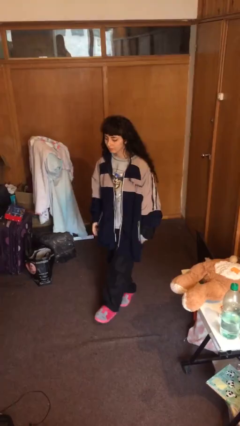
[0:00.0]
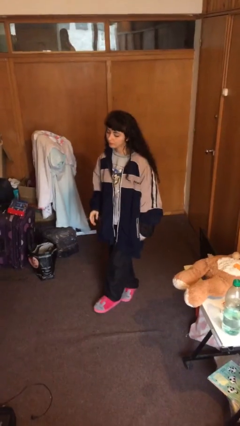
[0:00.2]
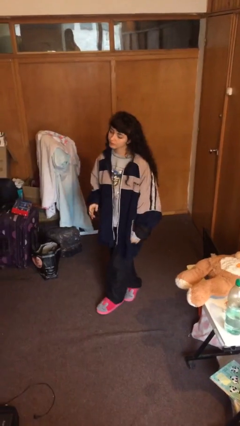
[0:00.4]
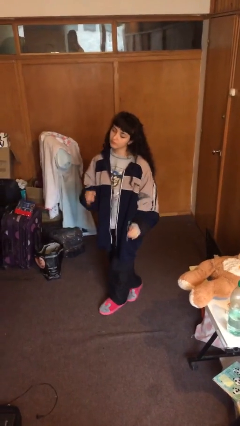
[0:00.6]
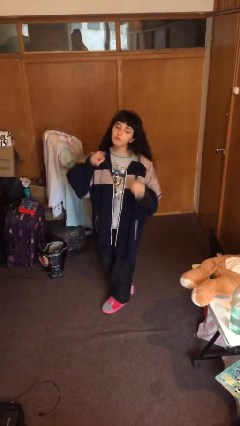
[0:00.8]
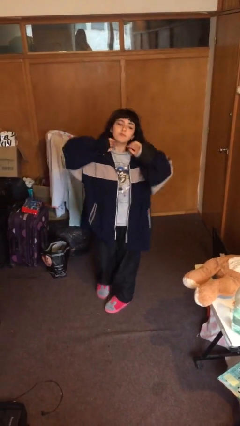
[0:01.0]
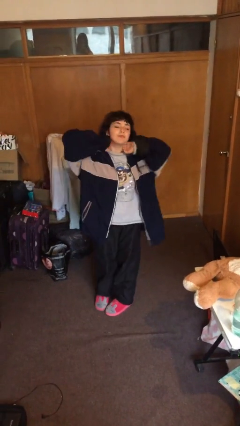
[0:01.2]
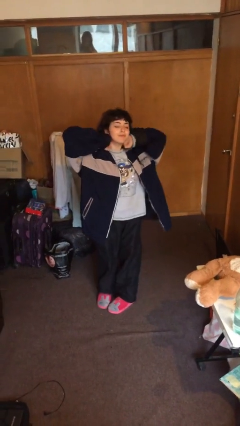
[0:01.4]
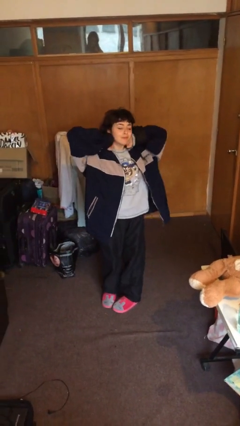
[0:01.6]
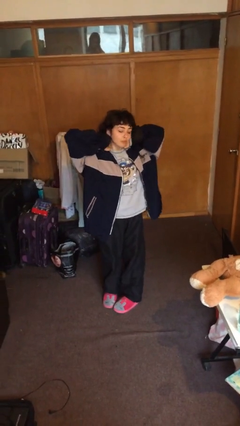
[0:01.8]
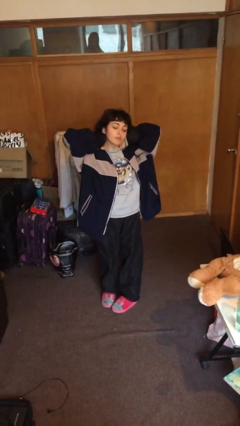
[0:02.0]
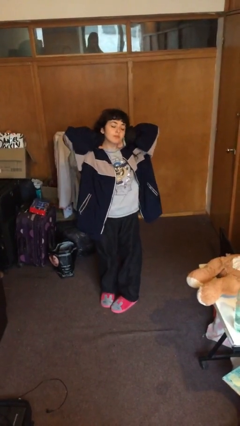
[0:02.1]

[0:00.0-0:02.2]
person rubs neck

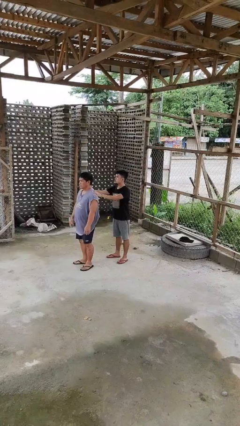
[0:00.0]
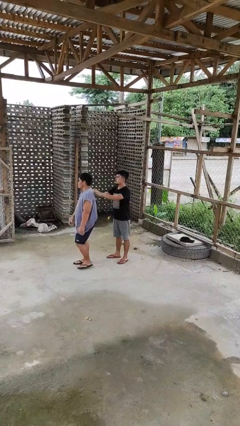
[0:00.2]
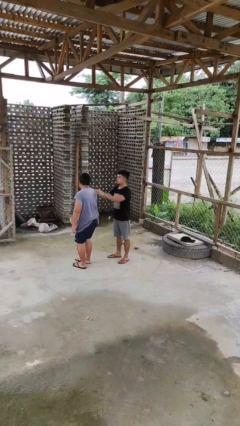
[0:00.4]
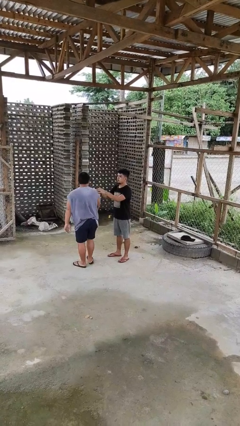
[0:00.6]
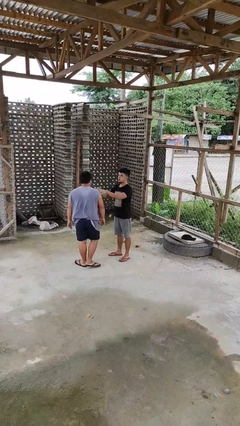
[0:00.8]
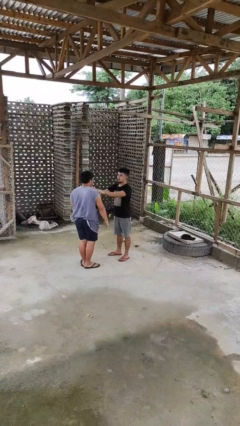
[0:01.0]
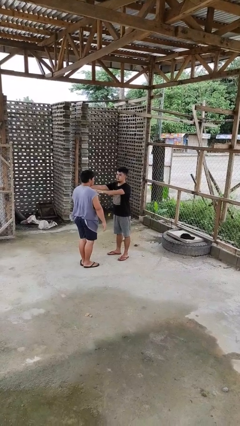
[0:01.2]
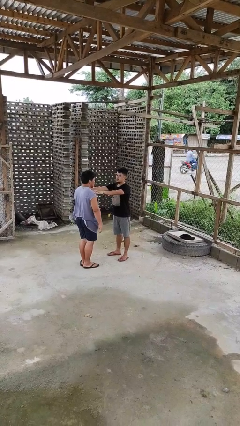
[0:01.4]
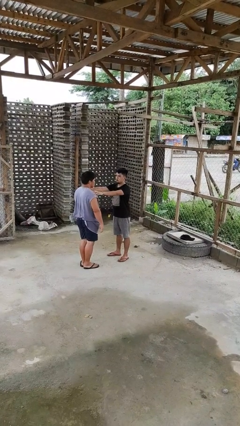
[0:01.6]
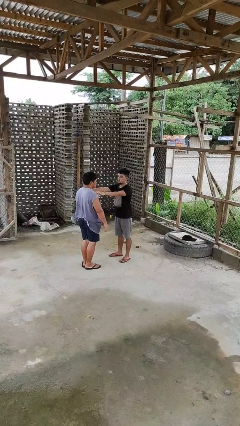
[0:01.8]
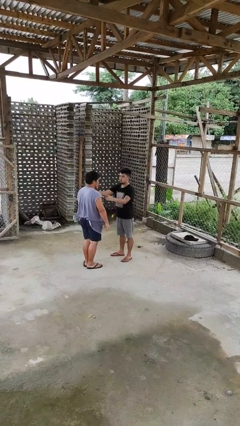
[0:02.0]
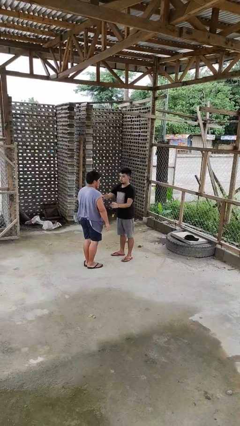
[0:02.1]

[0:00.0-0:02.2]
person spins person around

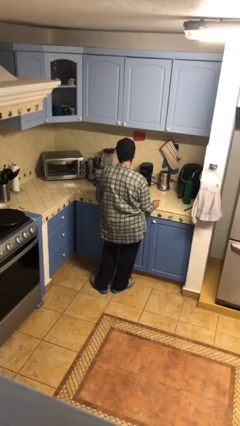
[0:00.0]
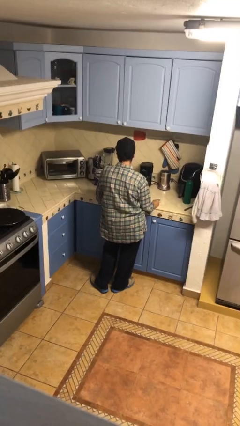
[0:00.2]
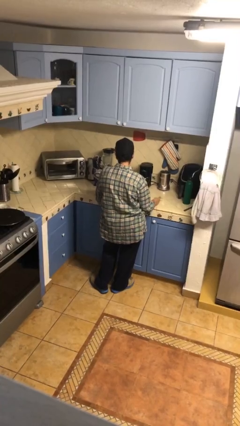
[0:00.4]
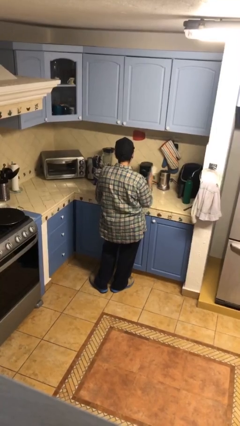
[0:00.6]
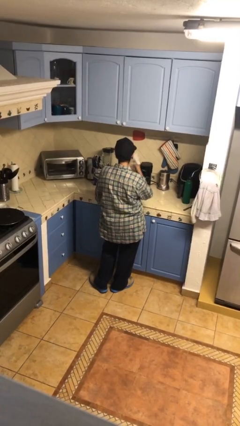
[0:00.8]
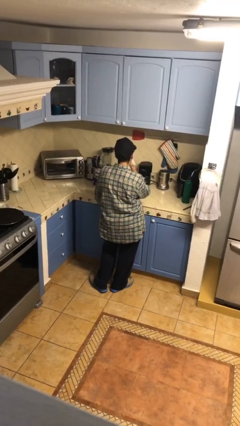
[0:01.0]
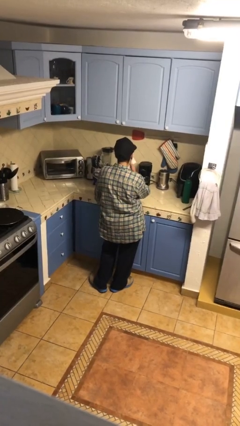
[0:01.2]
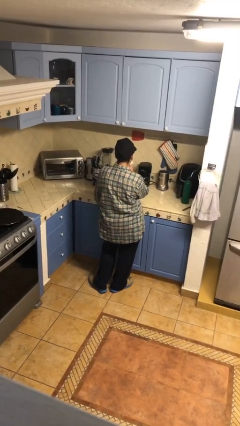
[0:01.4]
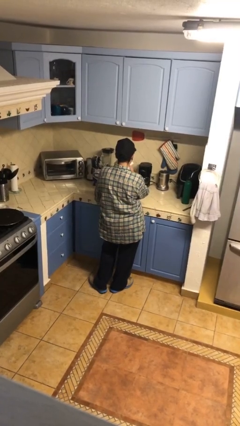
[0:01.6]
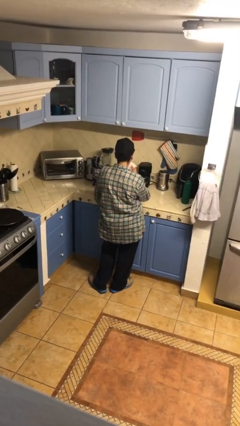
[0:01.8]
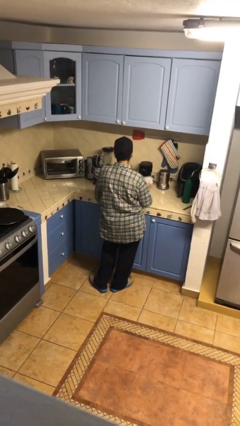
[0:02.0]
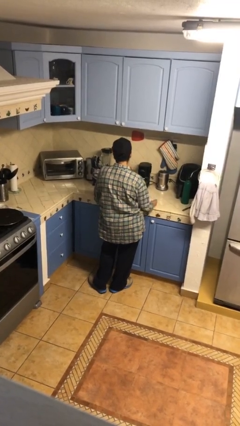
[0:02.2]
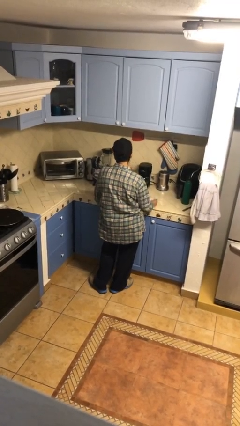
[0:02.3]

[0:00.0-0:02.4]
person wipes mouth with napkin

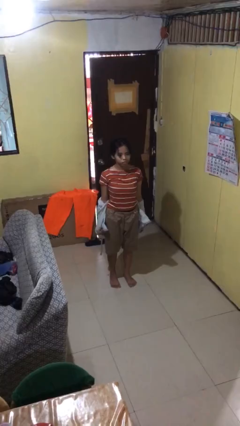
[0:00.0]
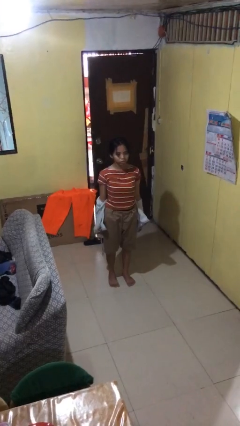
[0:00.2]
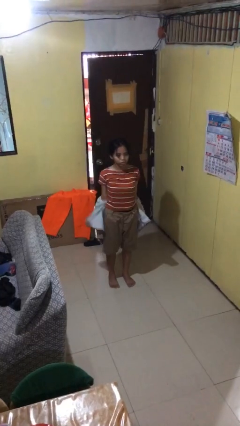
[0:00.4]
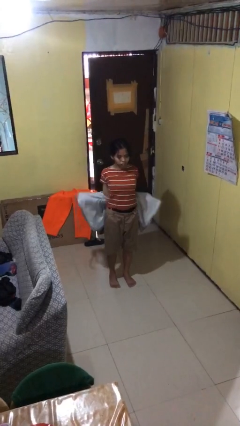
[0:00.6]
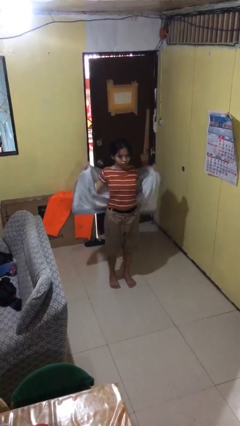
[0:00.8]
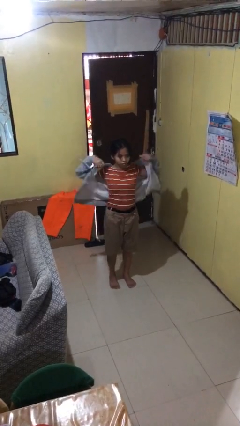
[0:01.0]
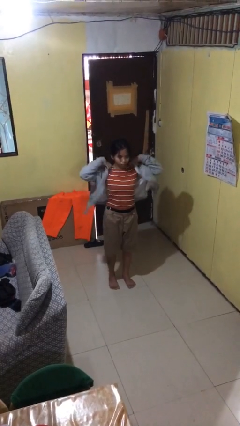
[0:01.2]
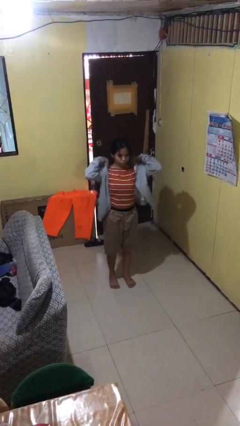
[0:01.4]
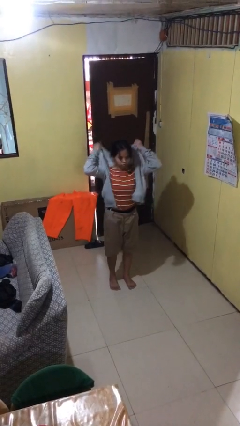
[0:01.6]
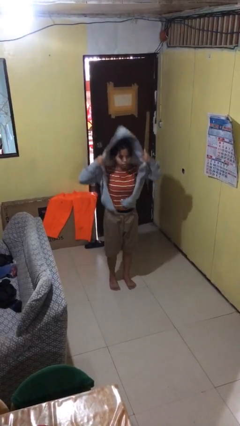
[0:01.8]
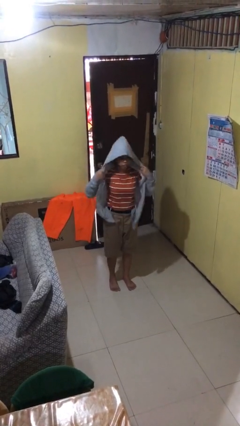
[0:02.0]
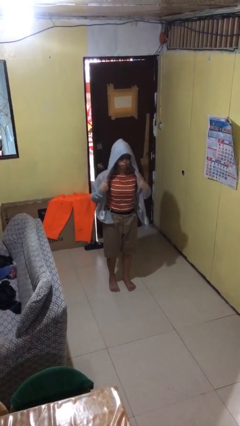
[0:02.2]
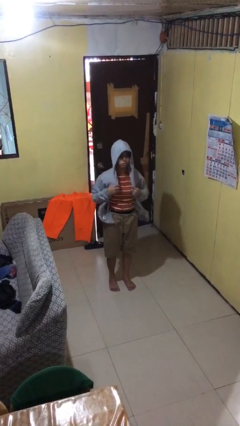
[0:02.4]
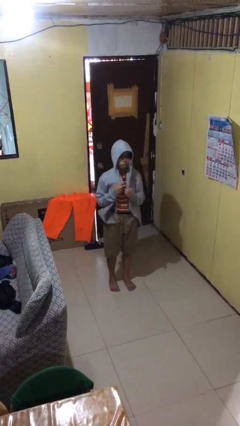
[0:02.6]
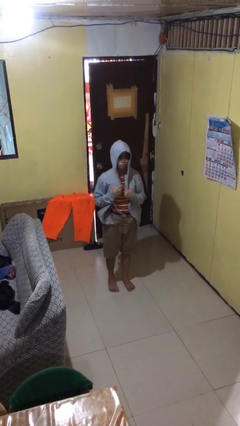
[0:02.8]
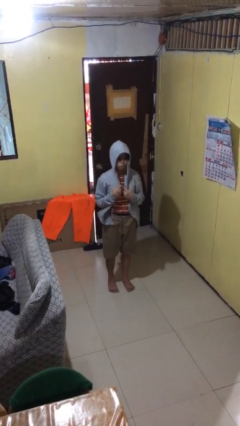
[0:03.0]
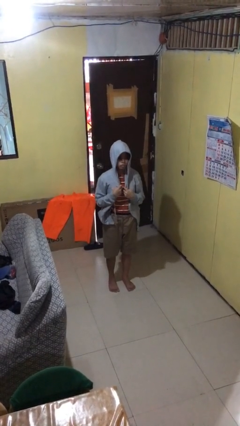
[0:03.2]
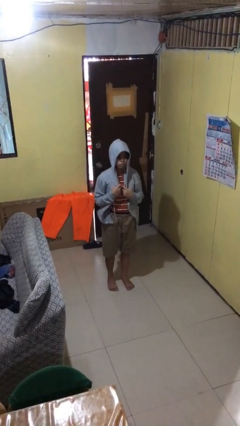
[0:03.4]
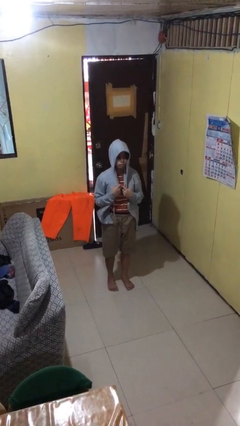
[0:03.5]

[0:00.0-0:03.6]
person puts on hoodie

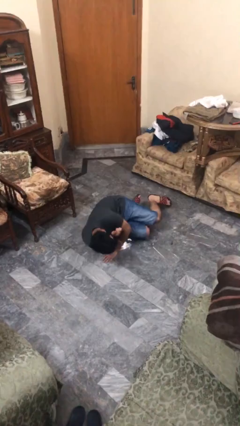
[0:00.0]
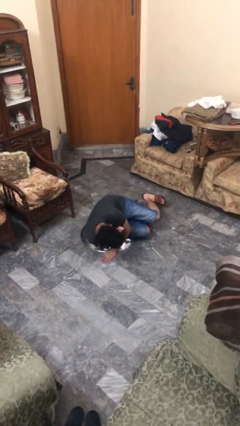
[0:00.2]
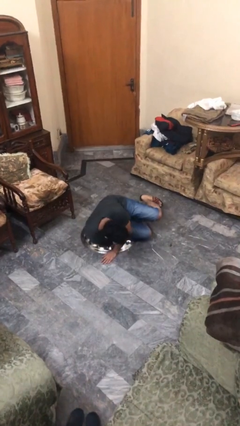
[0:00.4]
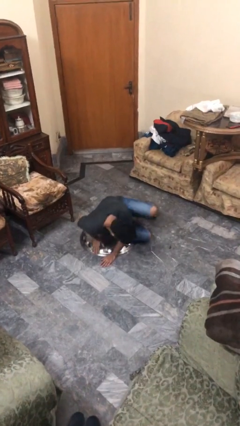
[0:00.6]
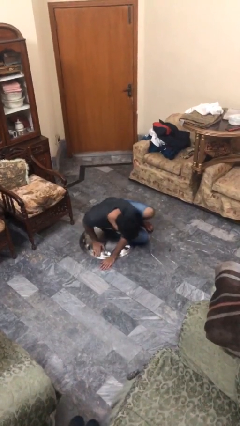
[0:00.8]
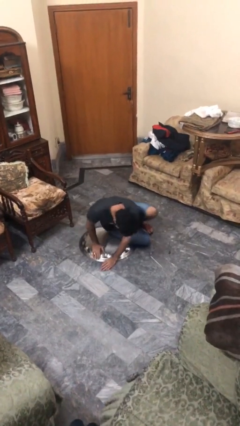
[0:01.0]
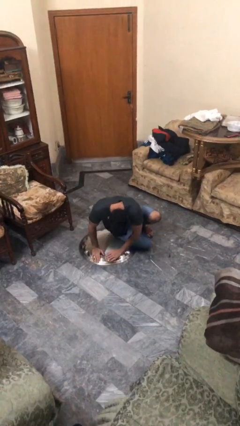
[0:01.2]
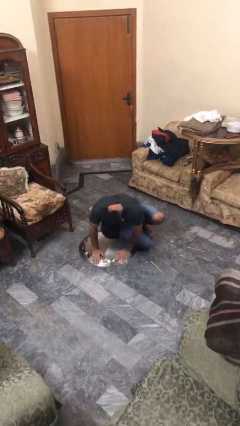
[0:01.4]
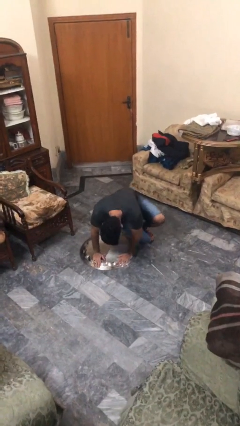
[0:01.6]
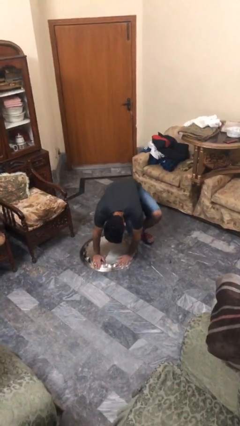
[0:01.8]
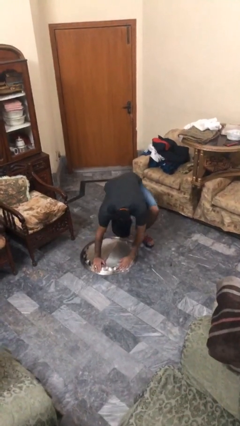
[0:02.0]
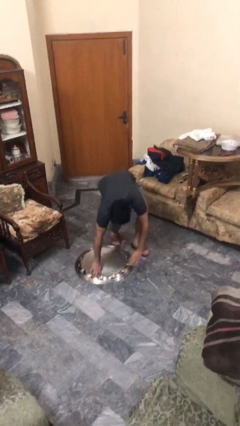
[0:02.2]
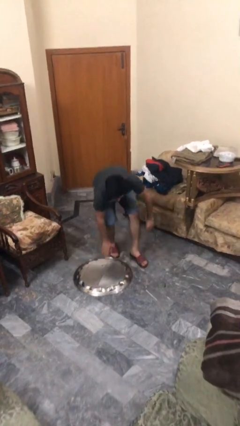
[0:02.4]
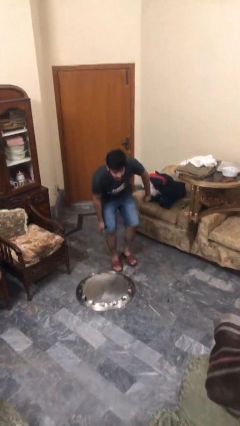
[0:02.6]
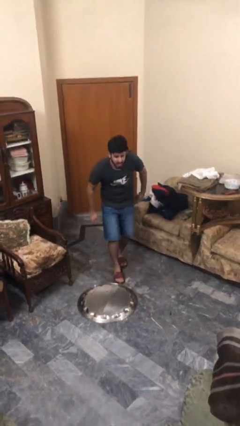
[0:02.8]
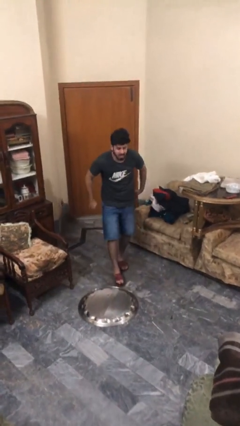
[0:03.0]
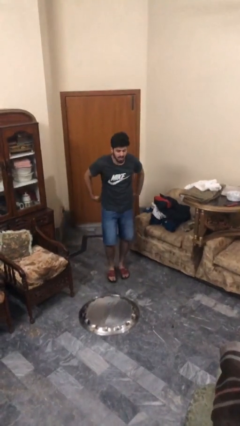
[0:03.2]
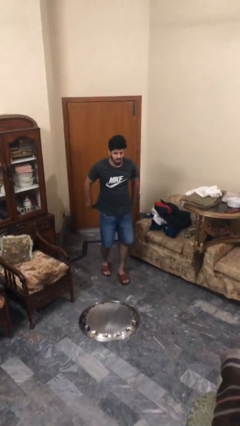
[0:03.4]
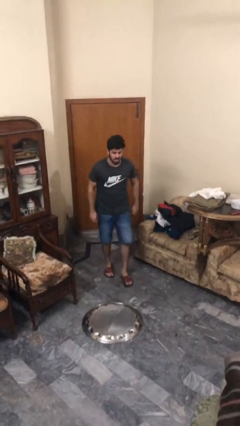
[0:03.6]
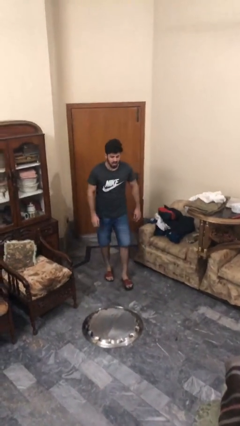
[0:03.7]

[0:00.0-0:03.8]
person stands up from floor

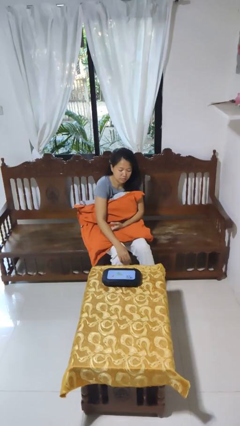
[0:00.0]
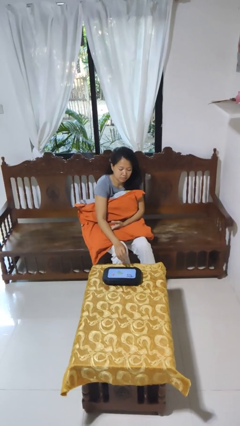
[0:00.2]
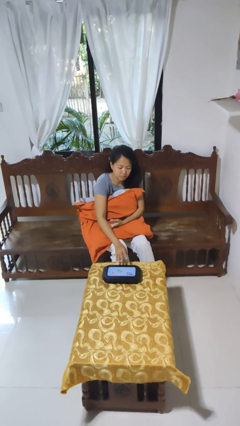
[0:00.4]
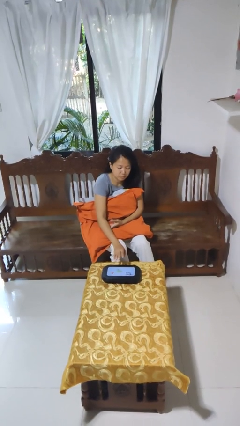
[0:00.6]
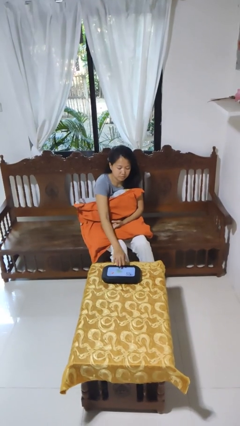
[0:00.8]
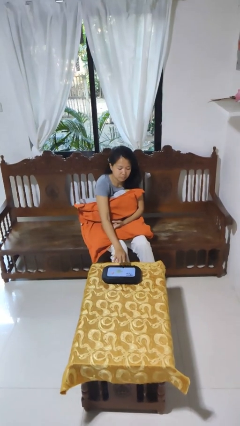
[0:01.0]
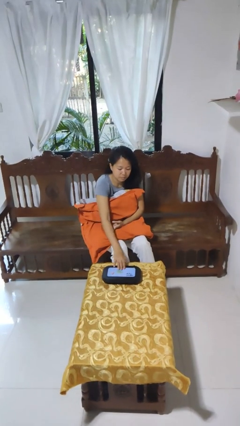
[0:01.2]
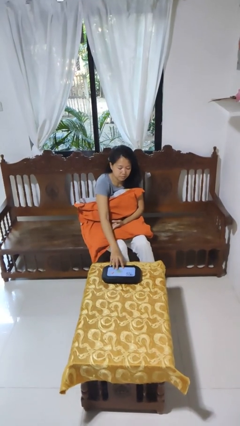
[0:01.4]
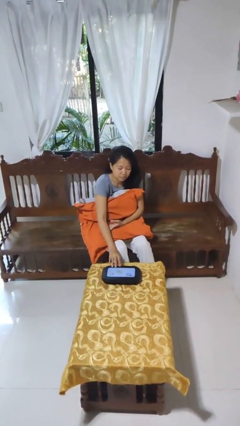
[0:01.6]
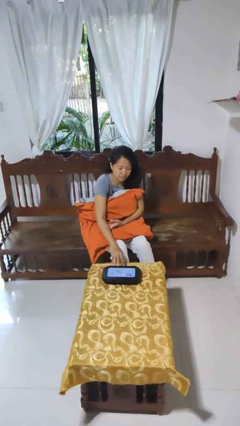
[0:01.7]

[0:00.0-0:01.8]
person taps object with finger

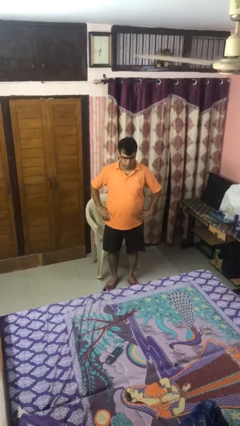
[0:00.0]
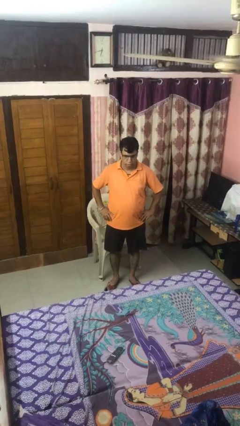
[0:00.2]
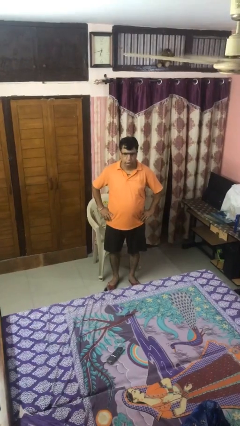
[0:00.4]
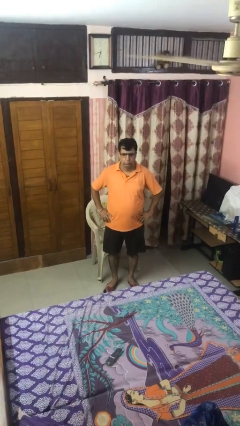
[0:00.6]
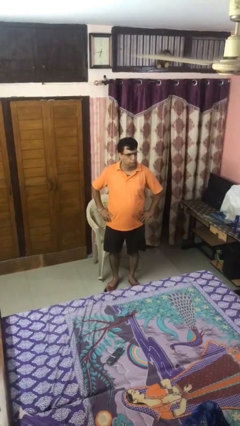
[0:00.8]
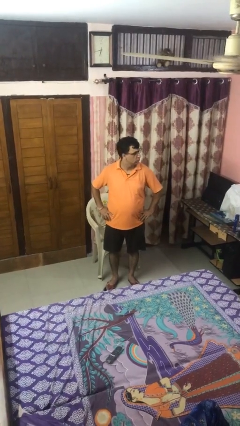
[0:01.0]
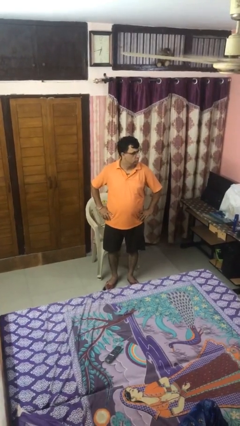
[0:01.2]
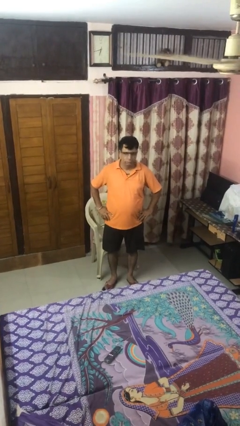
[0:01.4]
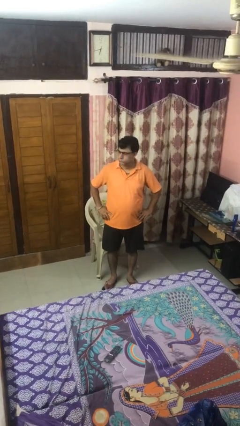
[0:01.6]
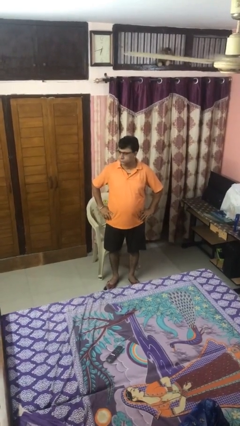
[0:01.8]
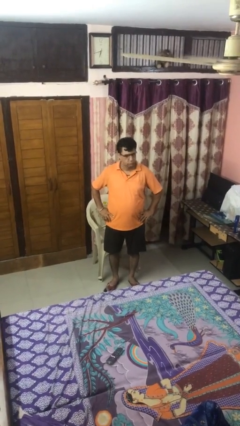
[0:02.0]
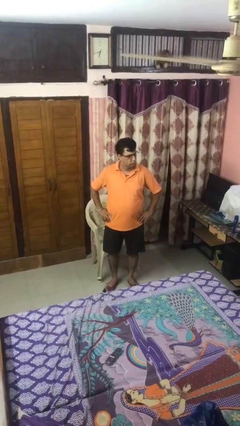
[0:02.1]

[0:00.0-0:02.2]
person shakes head
